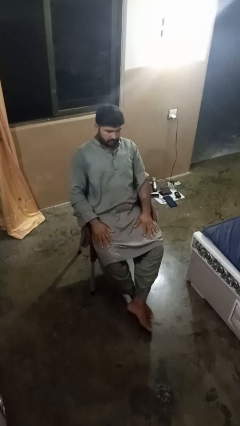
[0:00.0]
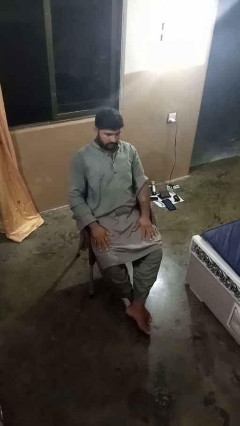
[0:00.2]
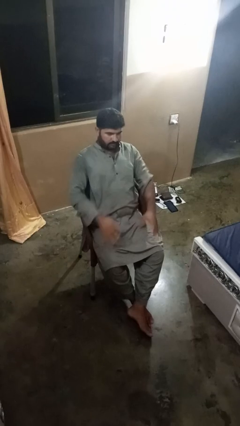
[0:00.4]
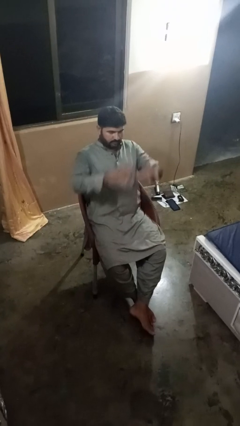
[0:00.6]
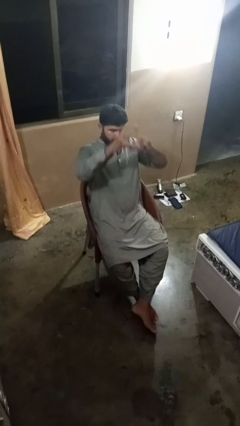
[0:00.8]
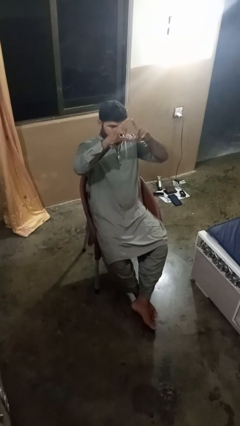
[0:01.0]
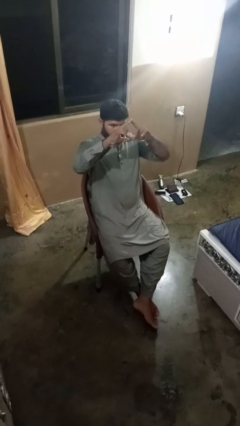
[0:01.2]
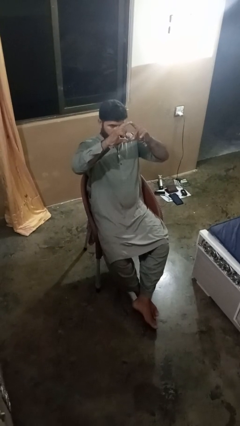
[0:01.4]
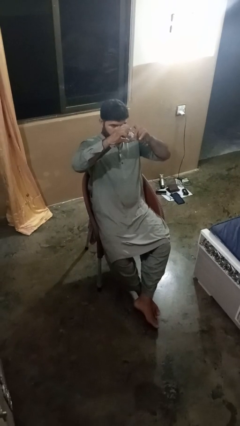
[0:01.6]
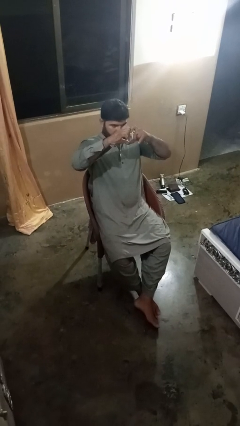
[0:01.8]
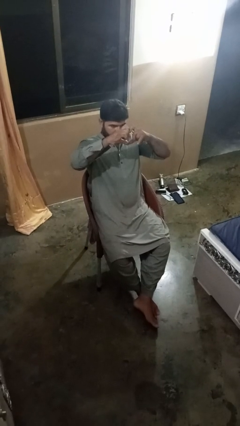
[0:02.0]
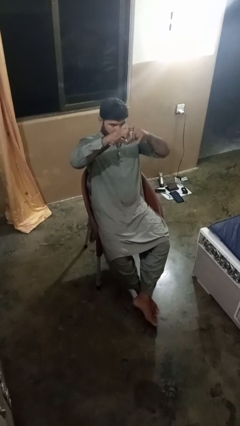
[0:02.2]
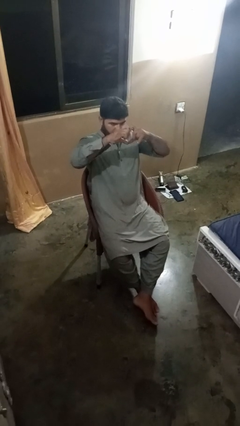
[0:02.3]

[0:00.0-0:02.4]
person gestures heart

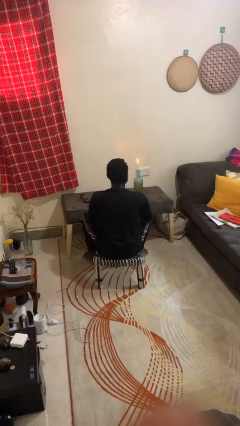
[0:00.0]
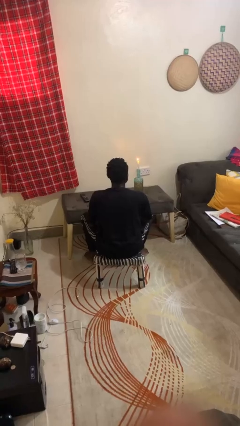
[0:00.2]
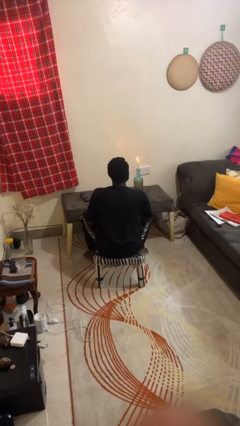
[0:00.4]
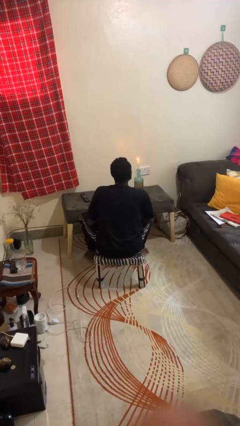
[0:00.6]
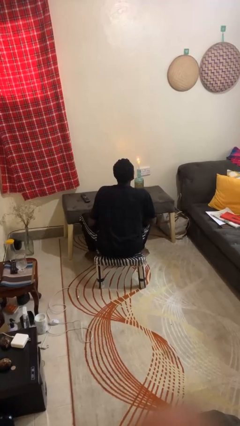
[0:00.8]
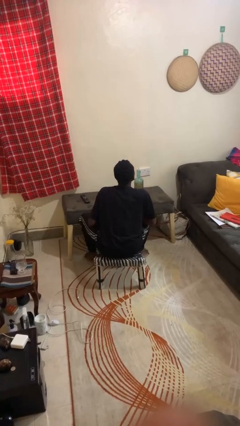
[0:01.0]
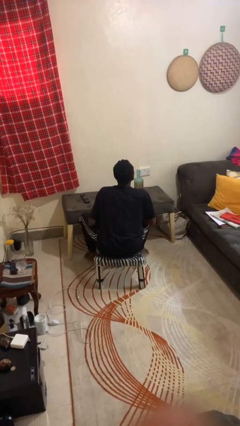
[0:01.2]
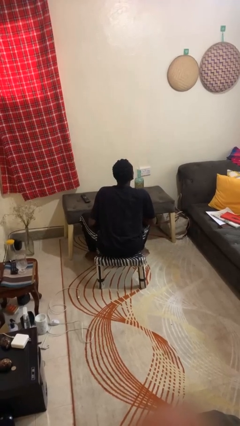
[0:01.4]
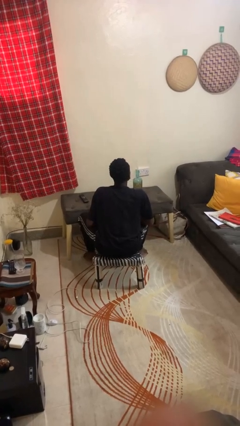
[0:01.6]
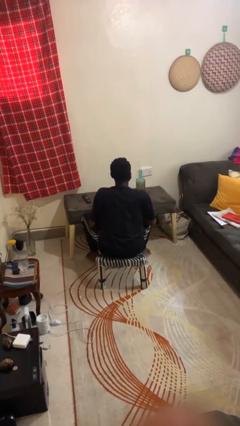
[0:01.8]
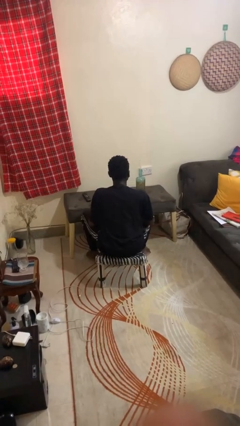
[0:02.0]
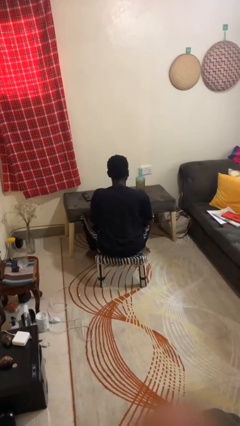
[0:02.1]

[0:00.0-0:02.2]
person extinguishes candle

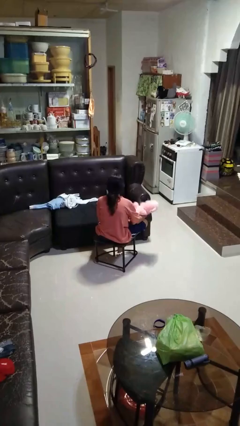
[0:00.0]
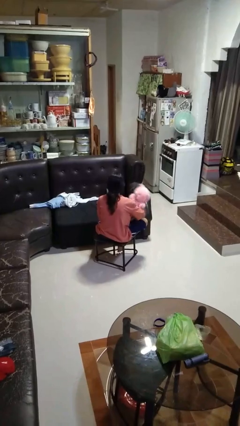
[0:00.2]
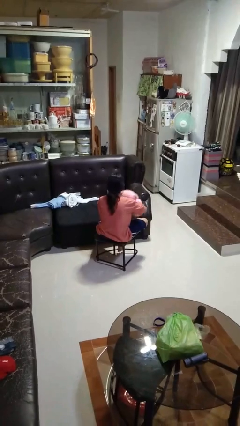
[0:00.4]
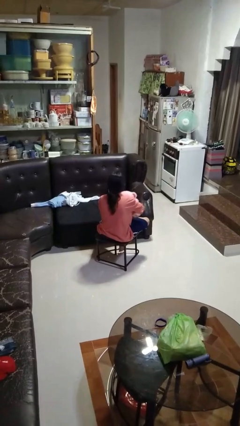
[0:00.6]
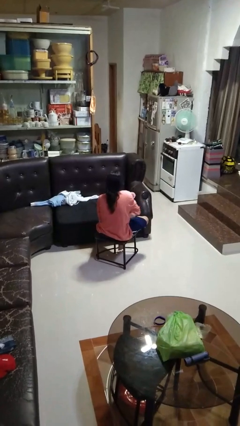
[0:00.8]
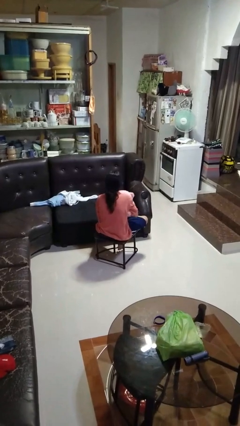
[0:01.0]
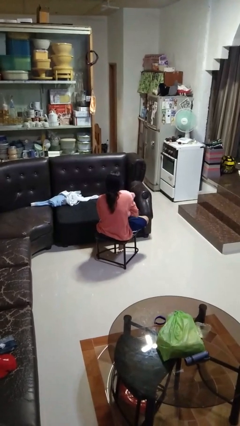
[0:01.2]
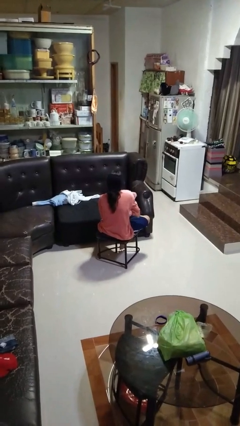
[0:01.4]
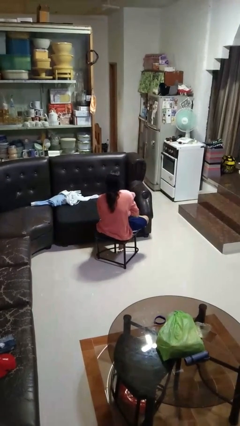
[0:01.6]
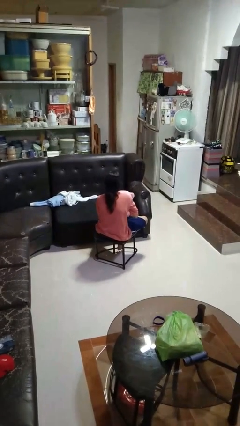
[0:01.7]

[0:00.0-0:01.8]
person hugs stuffed animal

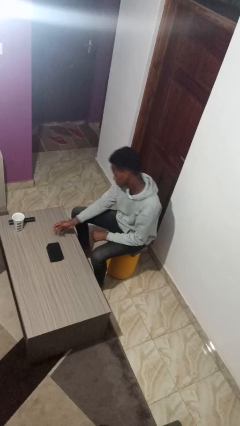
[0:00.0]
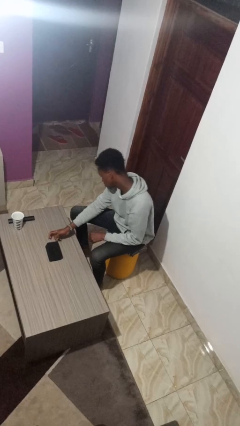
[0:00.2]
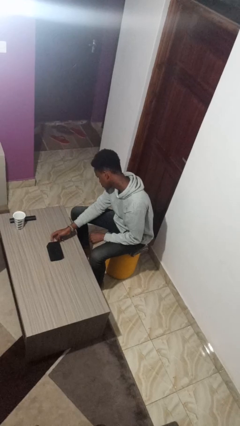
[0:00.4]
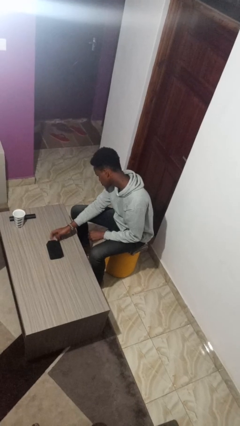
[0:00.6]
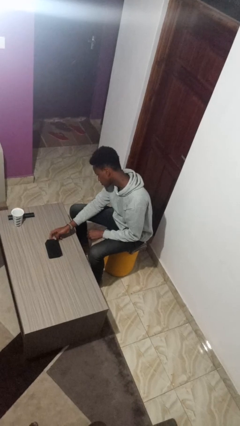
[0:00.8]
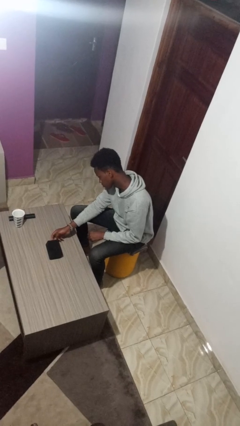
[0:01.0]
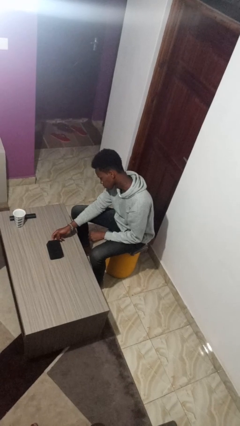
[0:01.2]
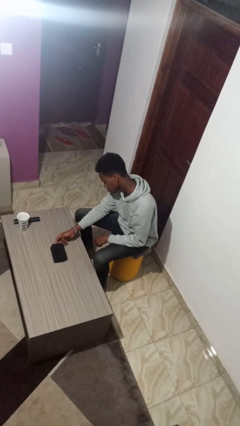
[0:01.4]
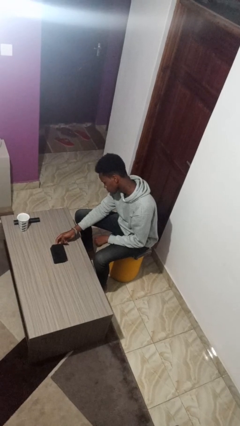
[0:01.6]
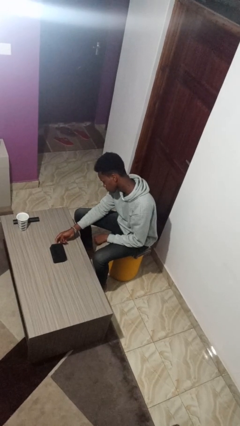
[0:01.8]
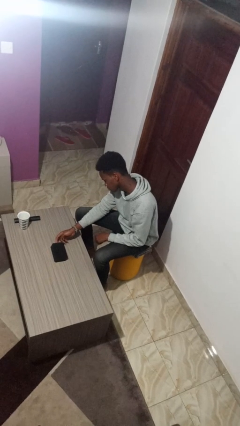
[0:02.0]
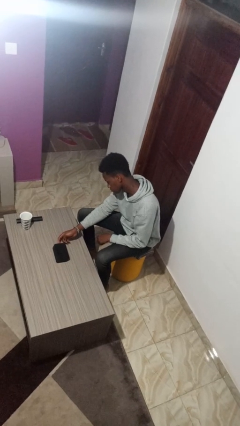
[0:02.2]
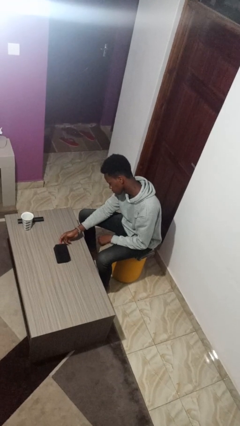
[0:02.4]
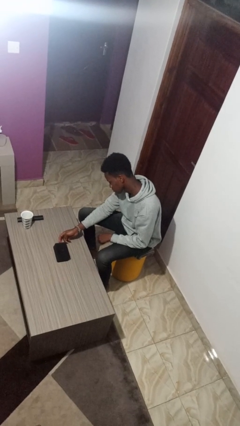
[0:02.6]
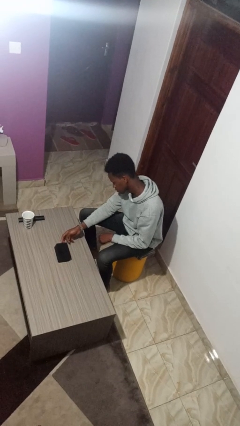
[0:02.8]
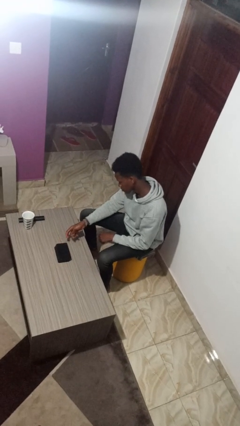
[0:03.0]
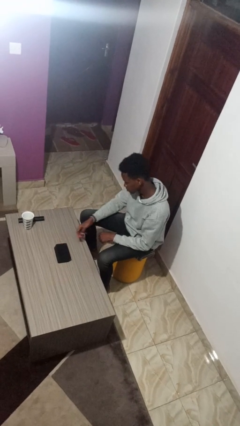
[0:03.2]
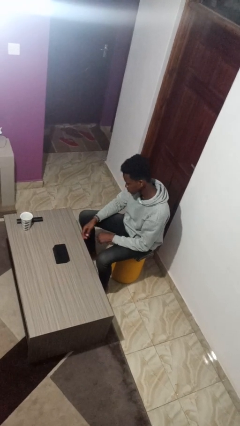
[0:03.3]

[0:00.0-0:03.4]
person taps object with finger

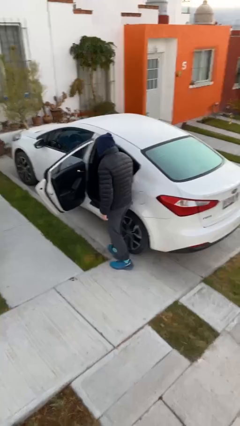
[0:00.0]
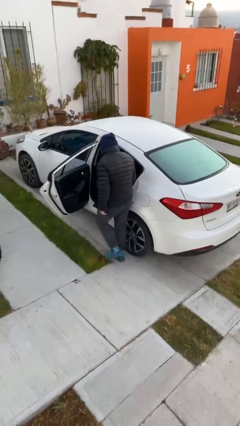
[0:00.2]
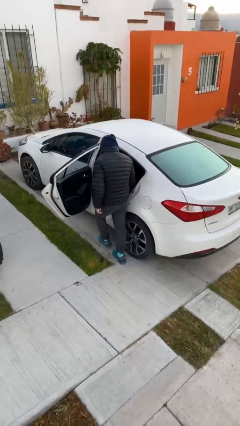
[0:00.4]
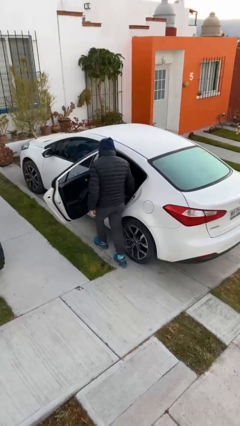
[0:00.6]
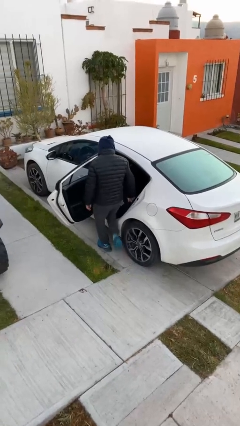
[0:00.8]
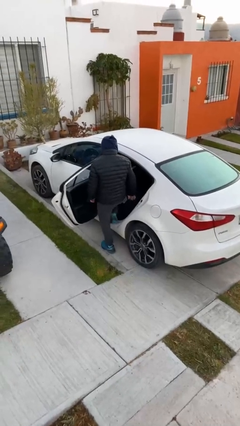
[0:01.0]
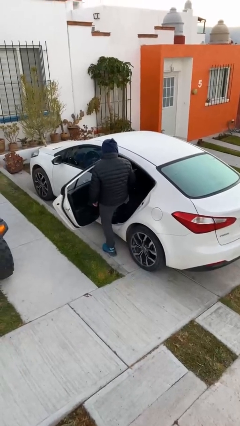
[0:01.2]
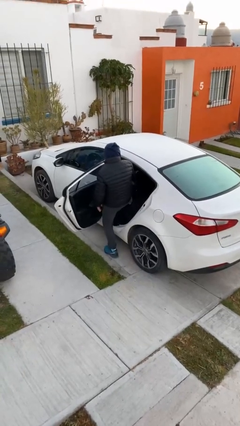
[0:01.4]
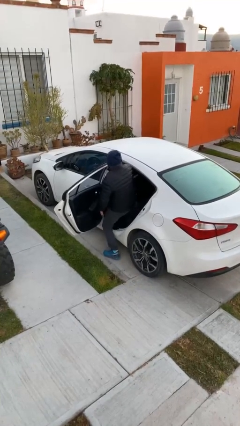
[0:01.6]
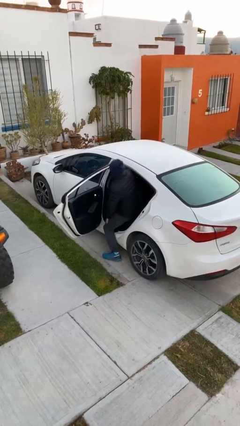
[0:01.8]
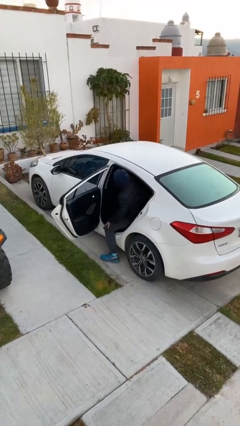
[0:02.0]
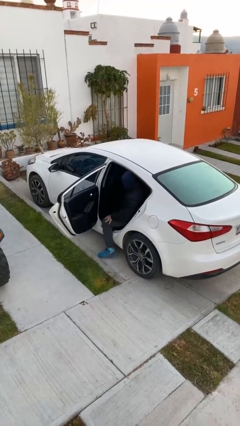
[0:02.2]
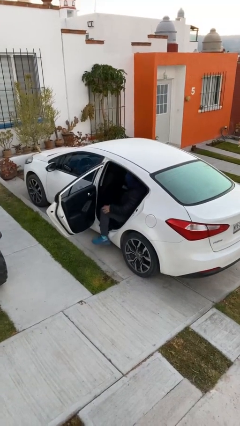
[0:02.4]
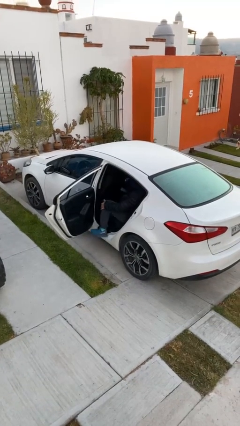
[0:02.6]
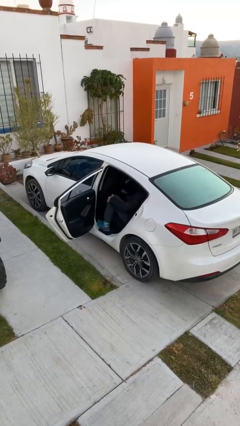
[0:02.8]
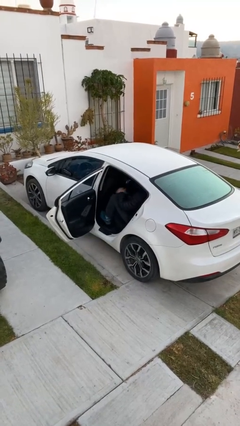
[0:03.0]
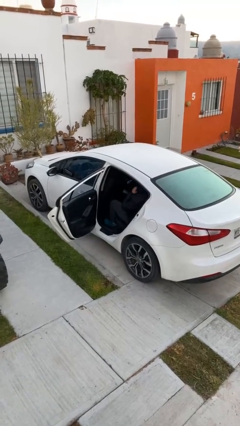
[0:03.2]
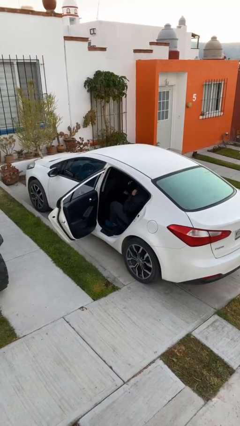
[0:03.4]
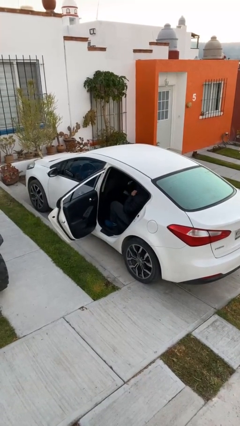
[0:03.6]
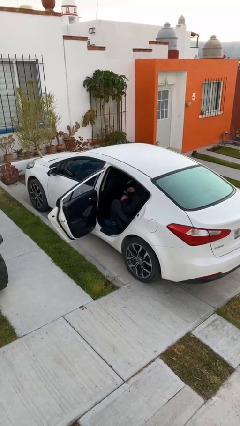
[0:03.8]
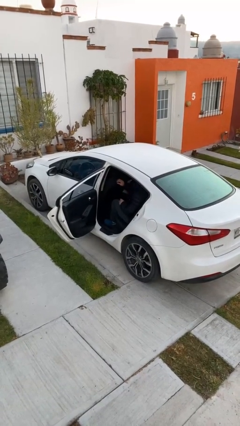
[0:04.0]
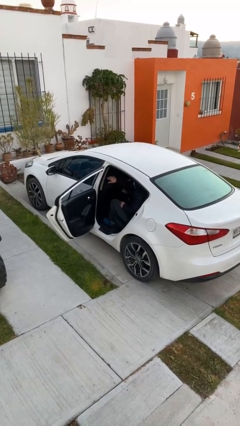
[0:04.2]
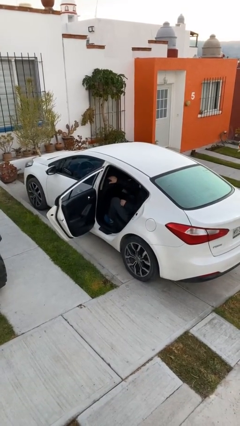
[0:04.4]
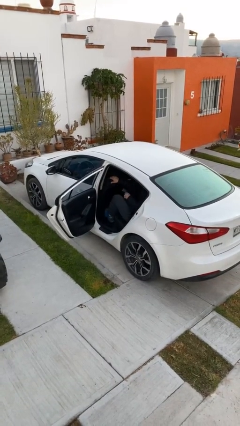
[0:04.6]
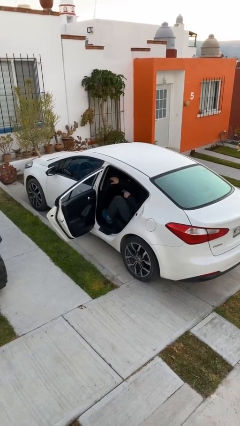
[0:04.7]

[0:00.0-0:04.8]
person enters car

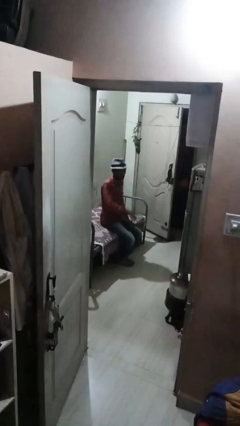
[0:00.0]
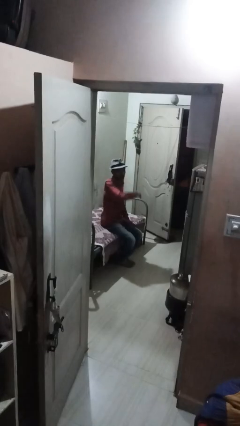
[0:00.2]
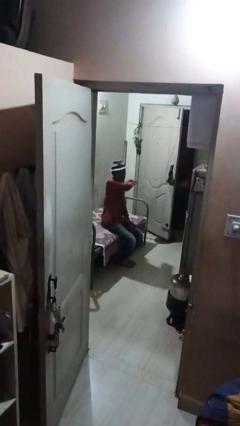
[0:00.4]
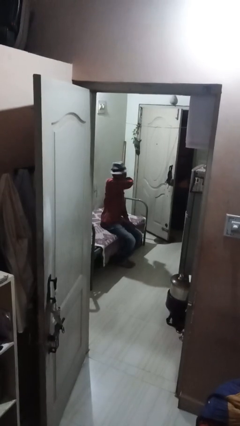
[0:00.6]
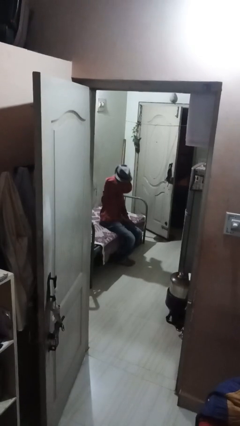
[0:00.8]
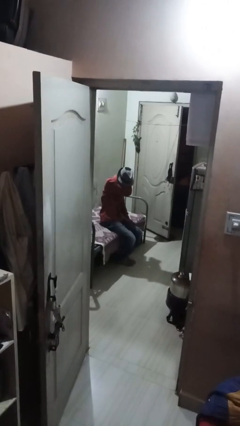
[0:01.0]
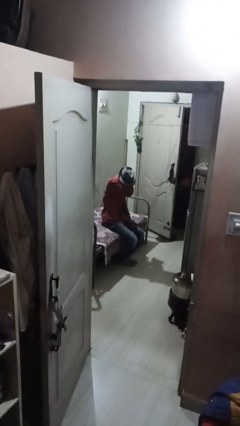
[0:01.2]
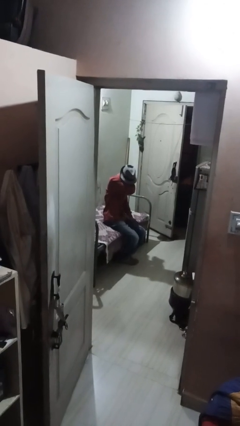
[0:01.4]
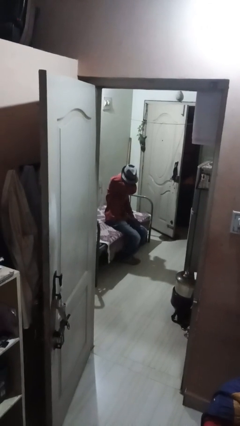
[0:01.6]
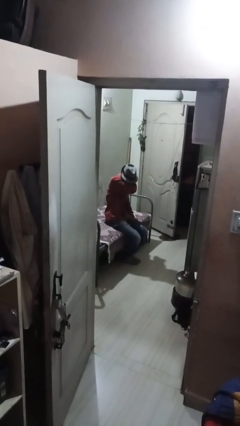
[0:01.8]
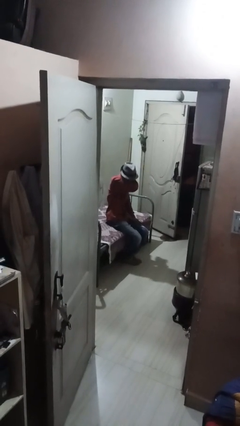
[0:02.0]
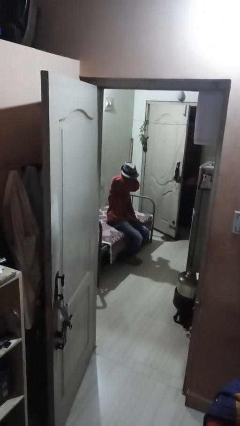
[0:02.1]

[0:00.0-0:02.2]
person sneezes into arm

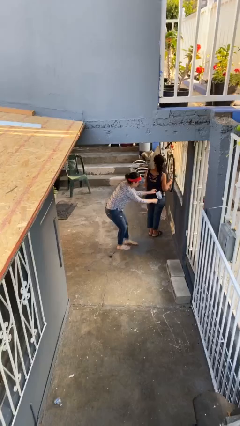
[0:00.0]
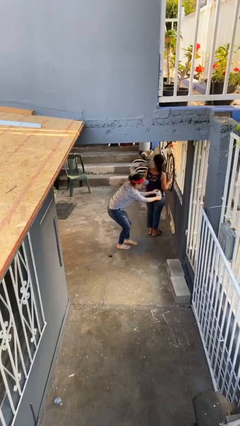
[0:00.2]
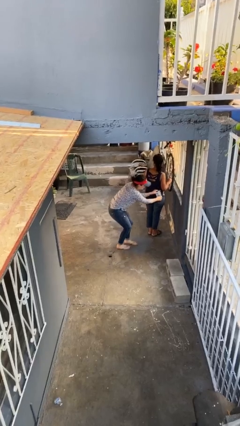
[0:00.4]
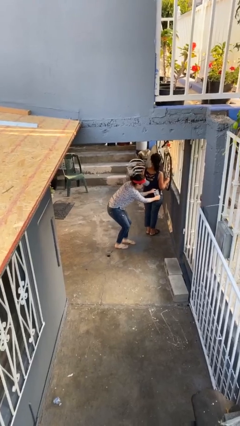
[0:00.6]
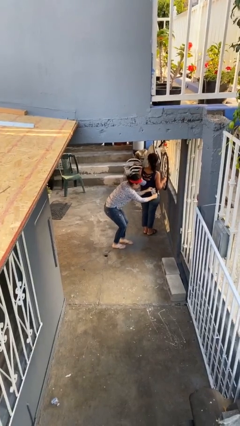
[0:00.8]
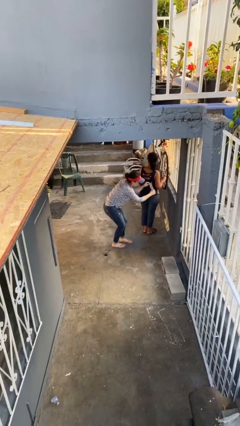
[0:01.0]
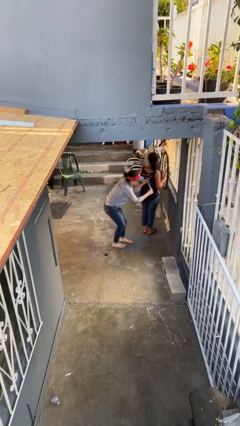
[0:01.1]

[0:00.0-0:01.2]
person steals object from person
